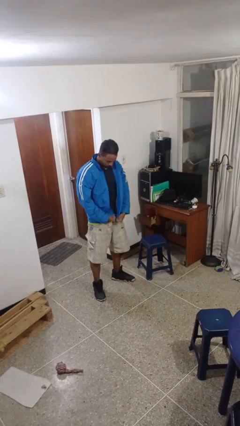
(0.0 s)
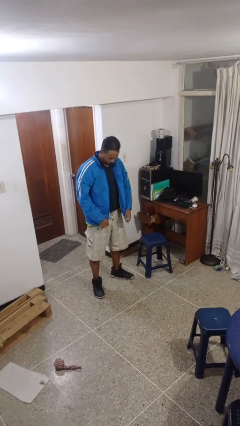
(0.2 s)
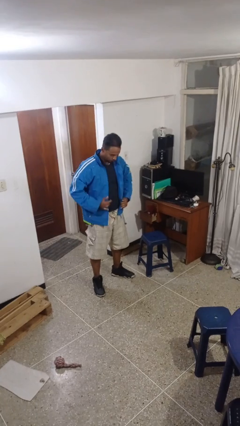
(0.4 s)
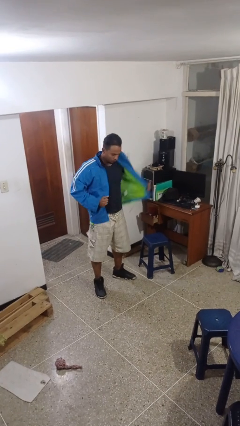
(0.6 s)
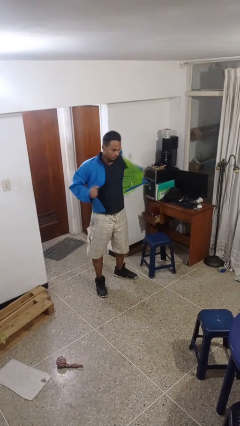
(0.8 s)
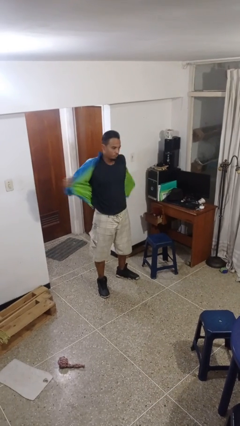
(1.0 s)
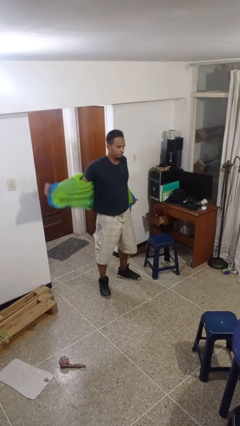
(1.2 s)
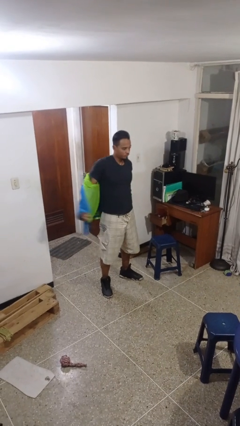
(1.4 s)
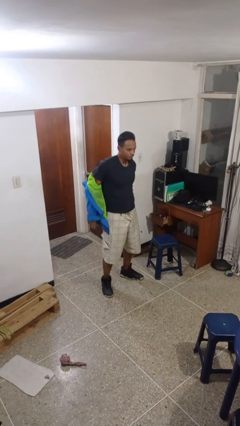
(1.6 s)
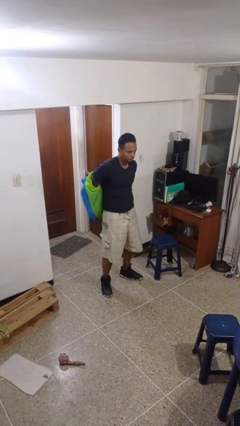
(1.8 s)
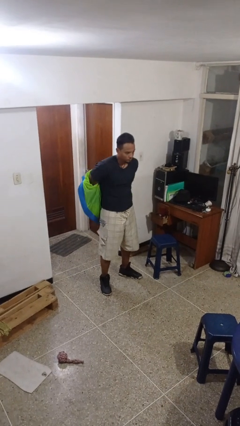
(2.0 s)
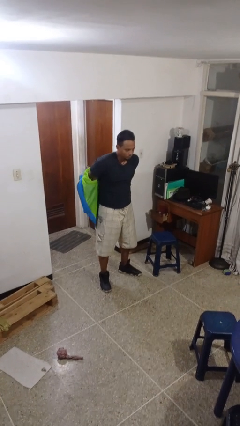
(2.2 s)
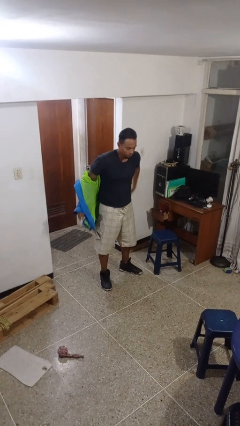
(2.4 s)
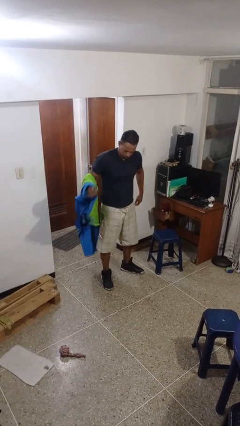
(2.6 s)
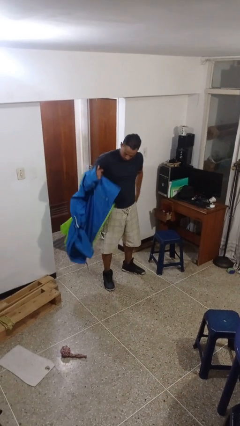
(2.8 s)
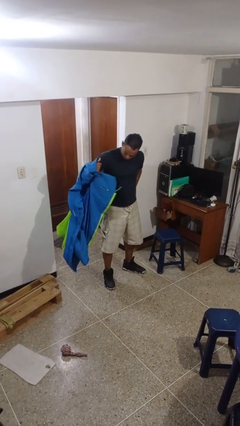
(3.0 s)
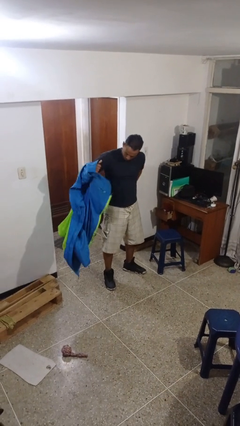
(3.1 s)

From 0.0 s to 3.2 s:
person takes off jacket

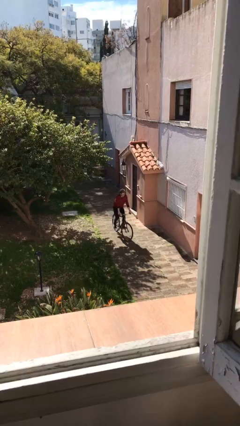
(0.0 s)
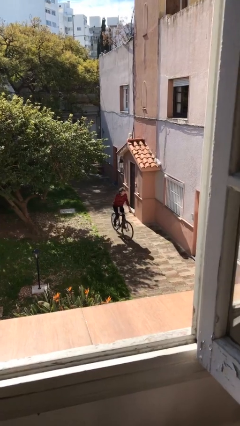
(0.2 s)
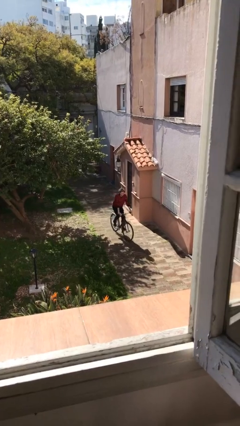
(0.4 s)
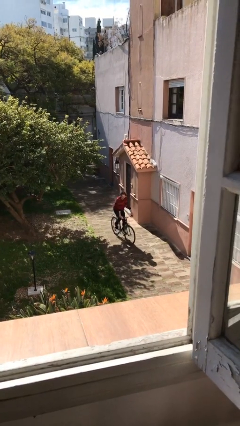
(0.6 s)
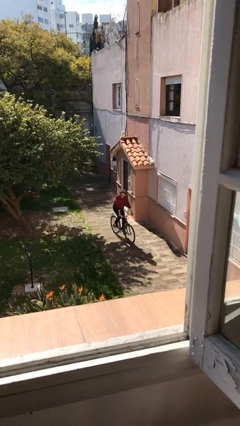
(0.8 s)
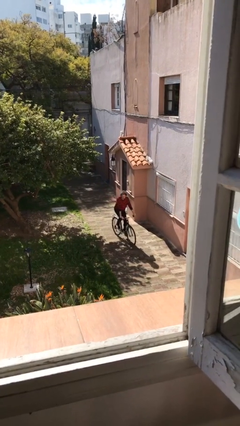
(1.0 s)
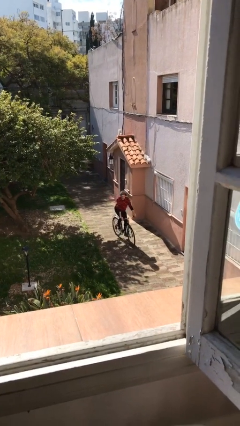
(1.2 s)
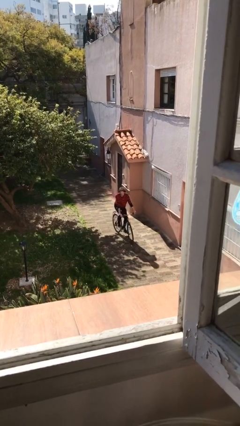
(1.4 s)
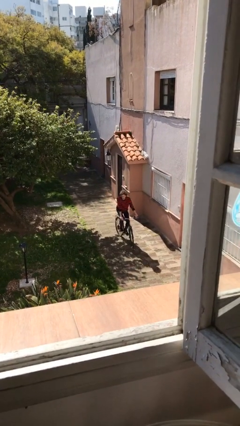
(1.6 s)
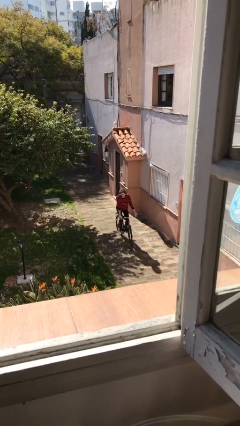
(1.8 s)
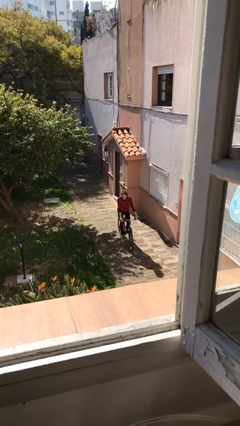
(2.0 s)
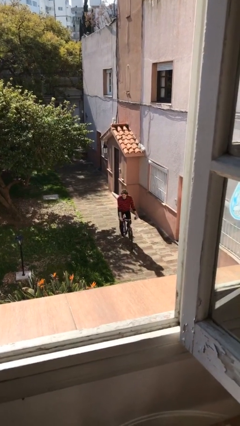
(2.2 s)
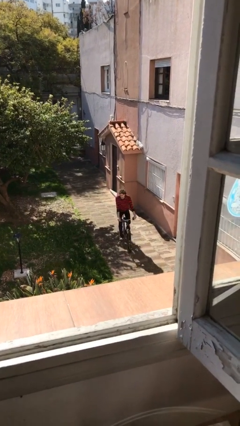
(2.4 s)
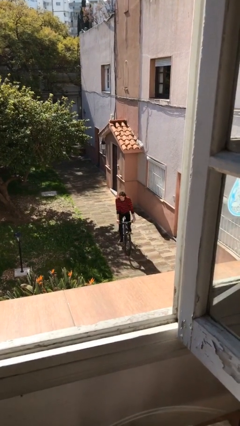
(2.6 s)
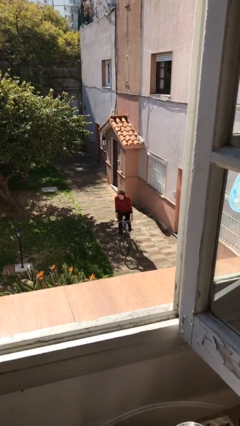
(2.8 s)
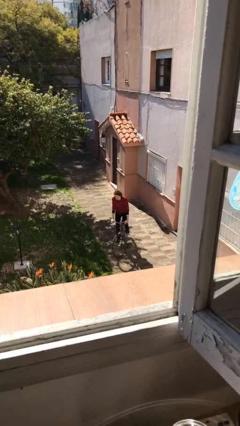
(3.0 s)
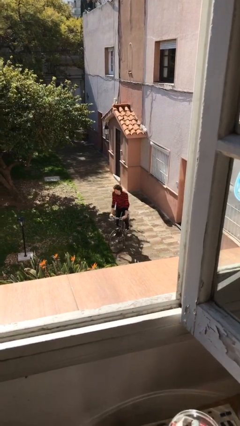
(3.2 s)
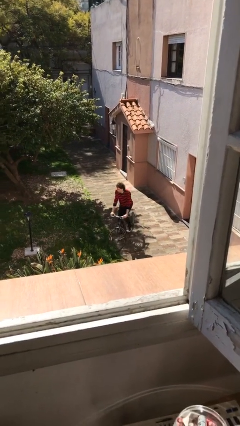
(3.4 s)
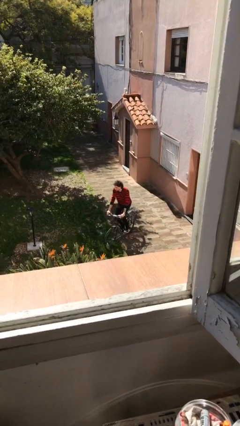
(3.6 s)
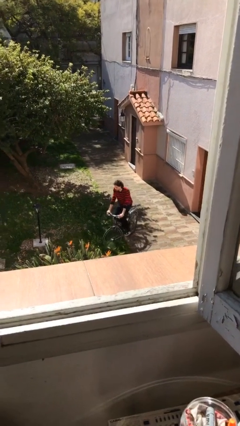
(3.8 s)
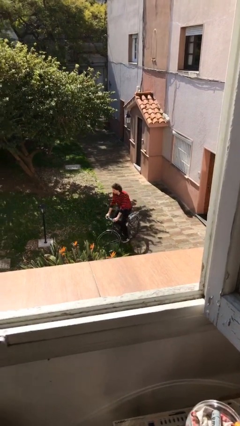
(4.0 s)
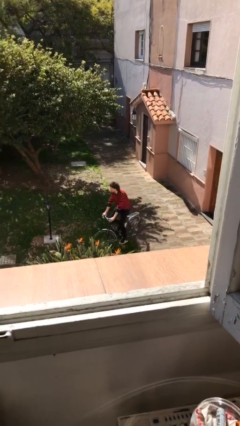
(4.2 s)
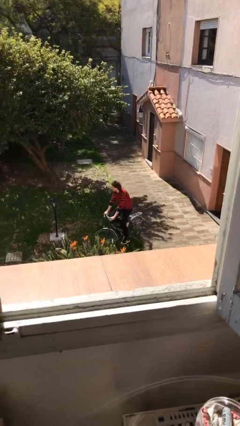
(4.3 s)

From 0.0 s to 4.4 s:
person rides bicycle

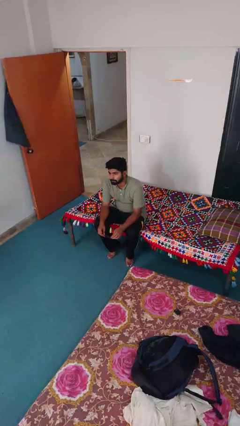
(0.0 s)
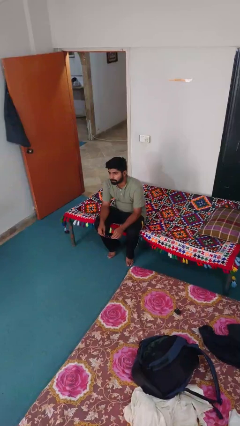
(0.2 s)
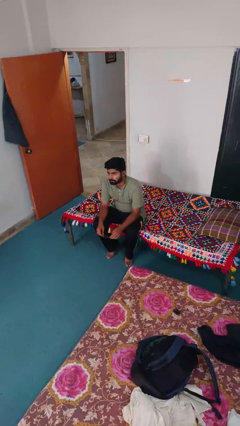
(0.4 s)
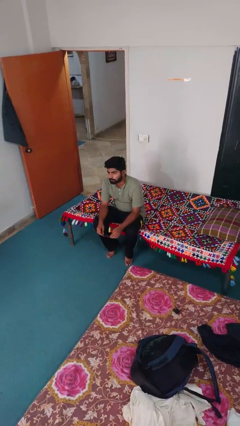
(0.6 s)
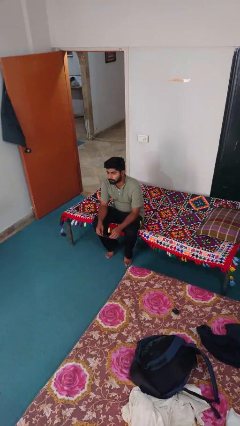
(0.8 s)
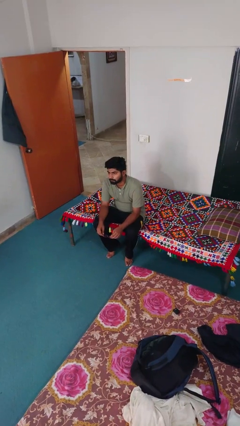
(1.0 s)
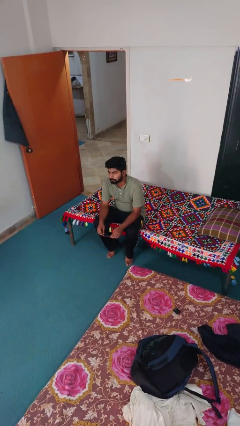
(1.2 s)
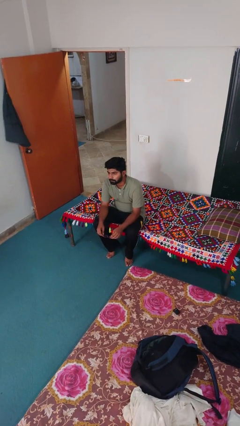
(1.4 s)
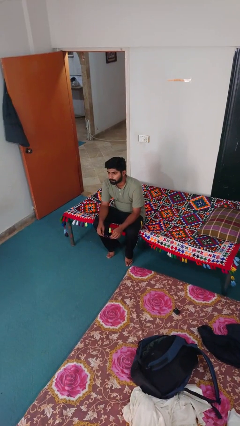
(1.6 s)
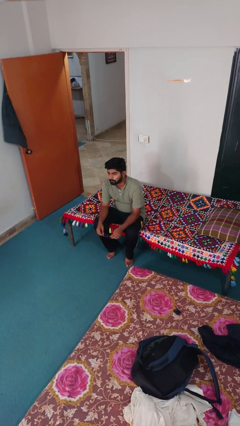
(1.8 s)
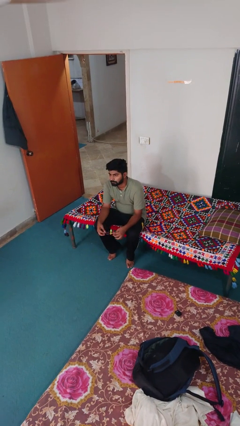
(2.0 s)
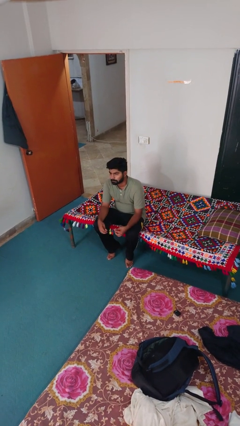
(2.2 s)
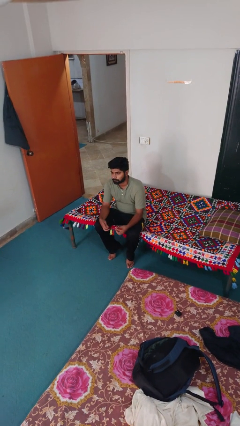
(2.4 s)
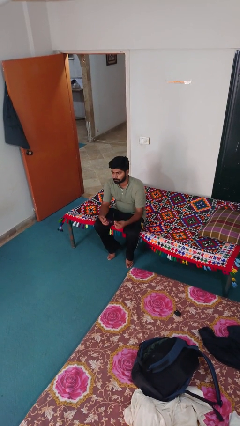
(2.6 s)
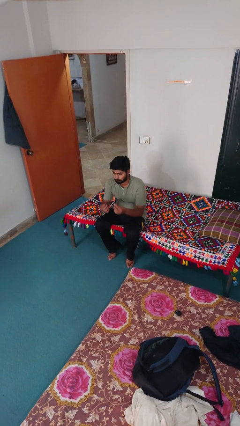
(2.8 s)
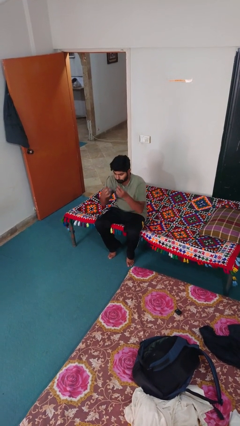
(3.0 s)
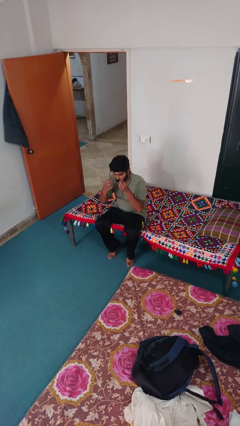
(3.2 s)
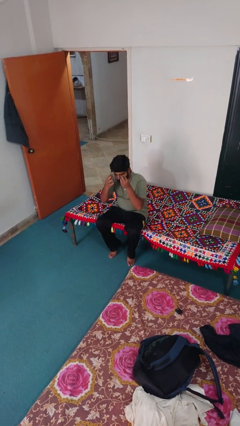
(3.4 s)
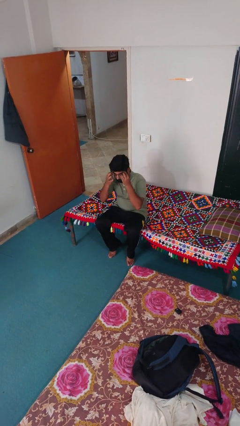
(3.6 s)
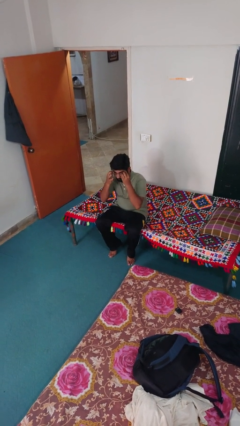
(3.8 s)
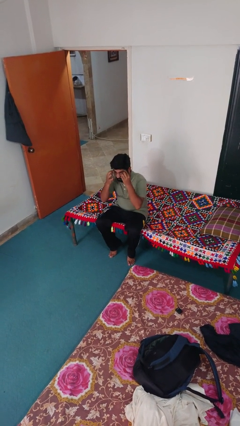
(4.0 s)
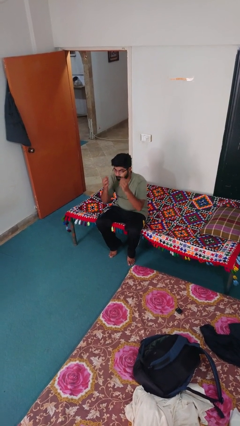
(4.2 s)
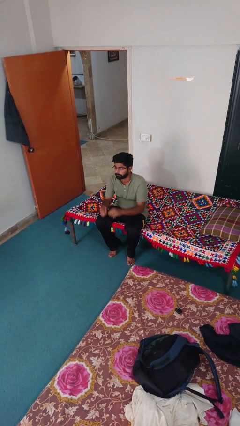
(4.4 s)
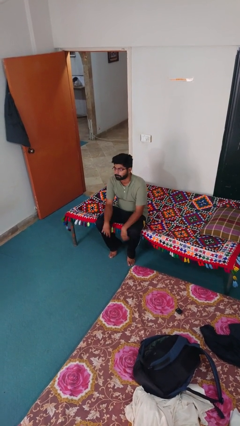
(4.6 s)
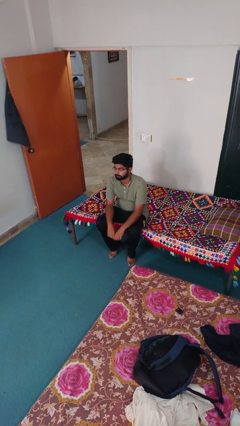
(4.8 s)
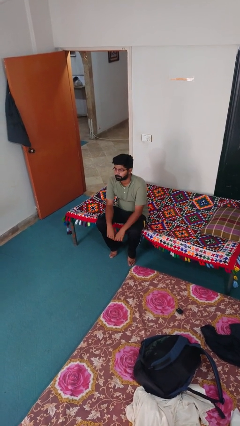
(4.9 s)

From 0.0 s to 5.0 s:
person puts on glasses

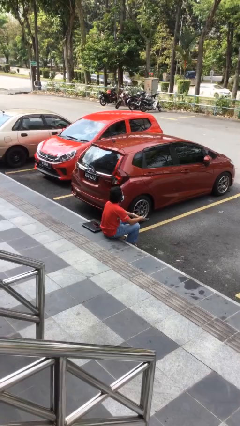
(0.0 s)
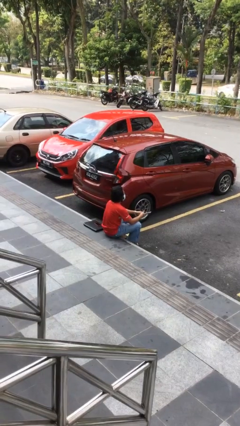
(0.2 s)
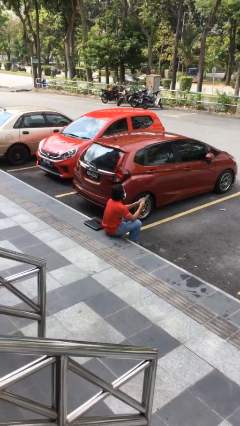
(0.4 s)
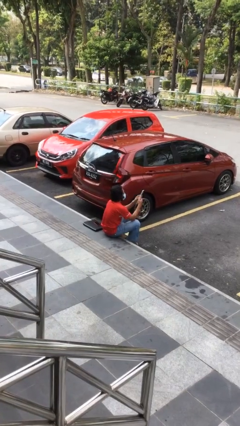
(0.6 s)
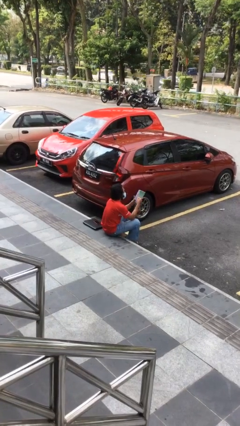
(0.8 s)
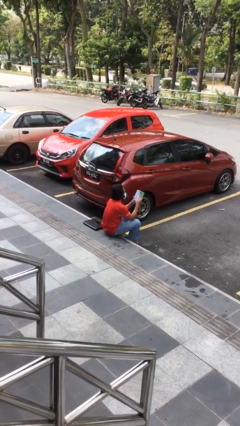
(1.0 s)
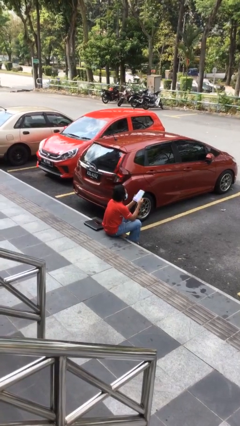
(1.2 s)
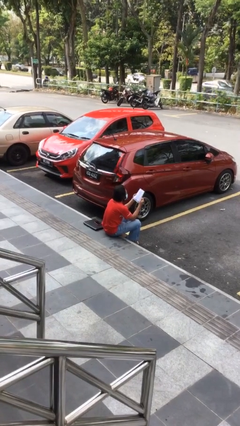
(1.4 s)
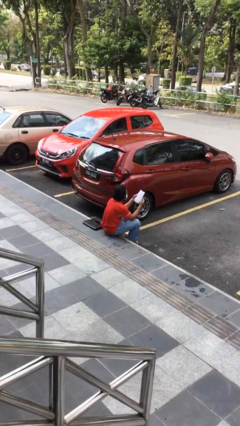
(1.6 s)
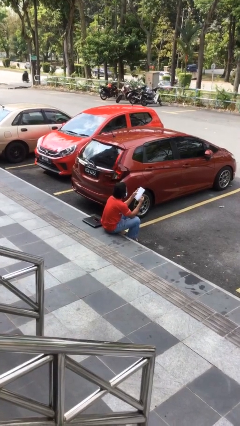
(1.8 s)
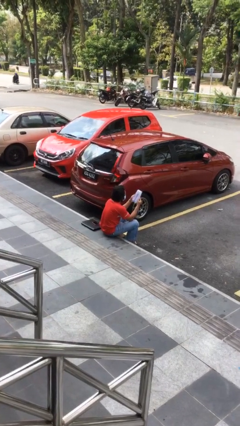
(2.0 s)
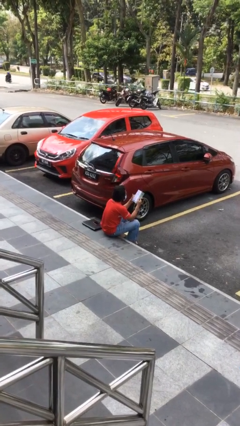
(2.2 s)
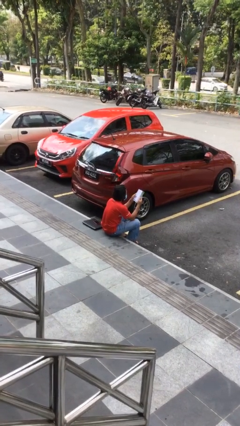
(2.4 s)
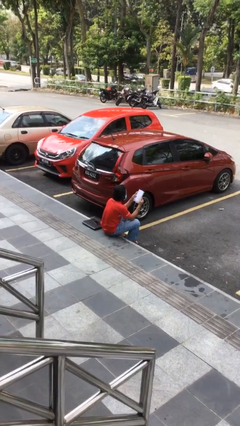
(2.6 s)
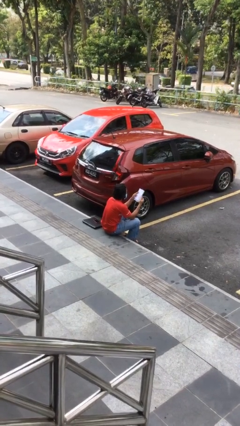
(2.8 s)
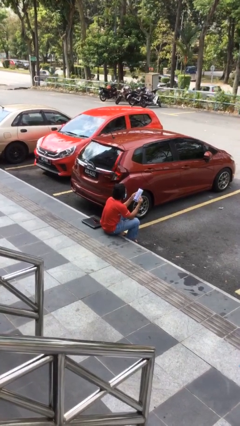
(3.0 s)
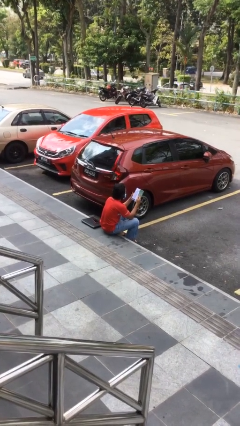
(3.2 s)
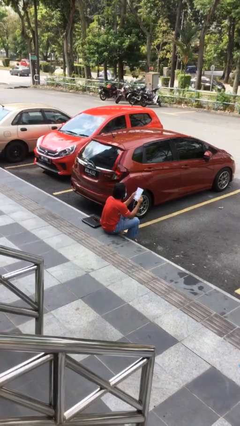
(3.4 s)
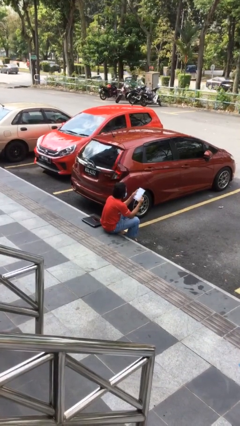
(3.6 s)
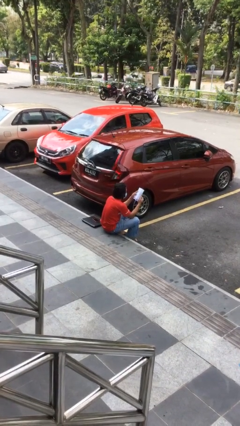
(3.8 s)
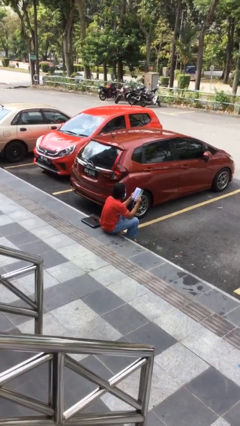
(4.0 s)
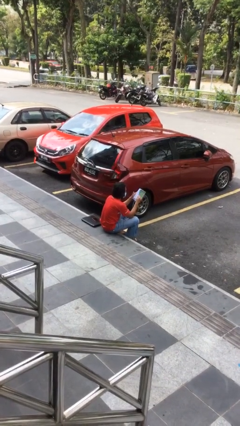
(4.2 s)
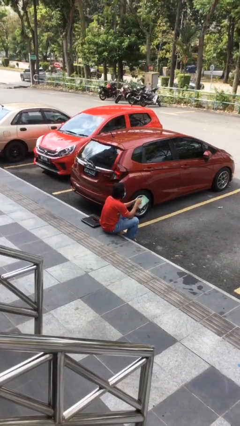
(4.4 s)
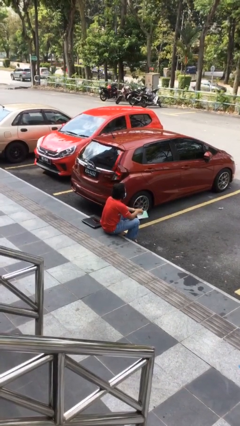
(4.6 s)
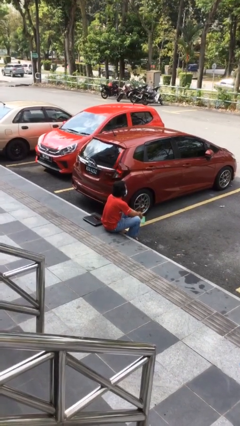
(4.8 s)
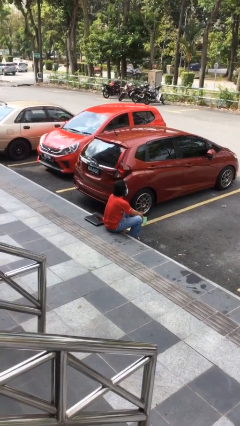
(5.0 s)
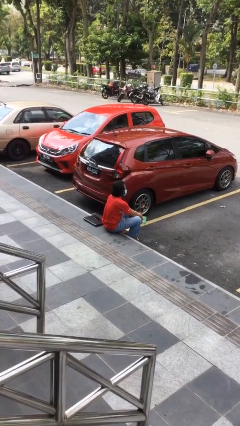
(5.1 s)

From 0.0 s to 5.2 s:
person reads document

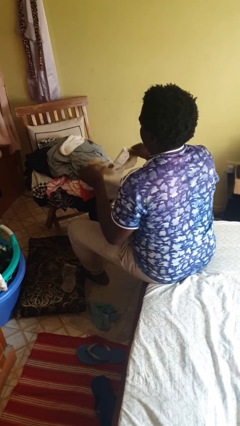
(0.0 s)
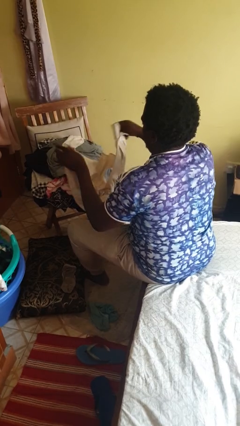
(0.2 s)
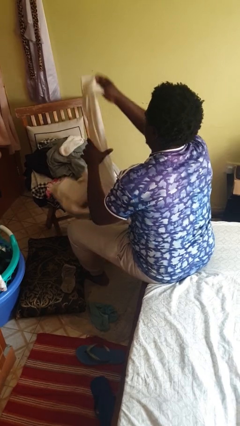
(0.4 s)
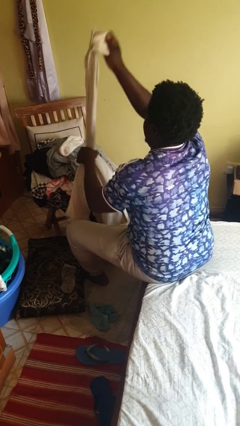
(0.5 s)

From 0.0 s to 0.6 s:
person folds shirt
